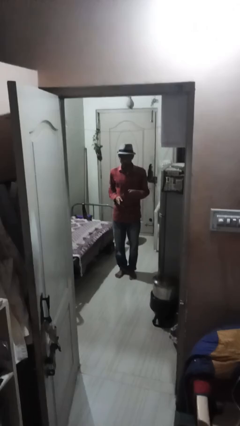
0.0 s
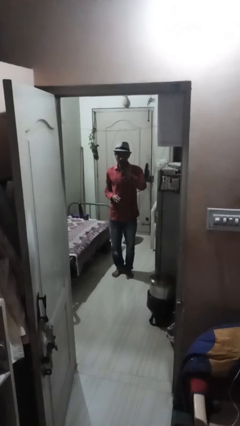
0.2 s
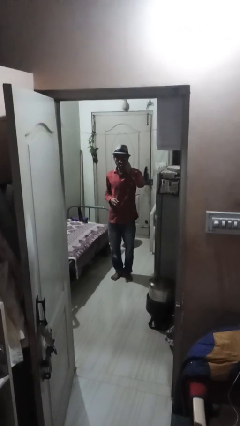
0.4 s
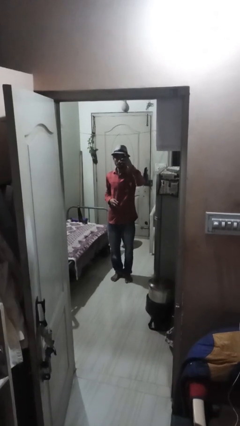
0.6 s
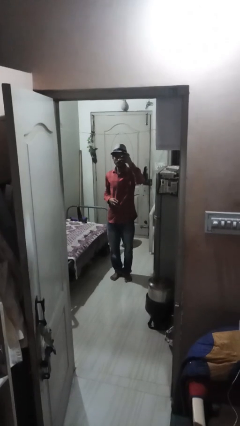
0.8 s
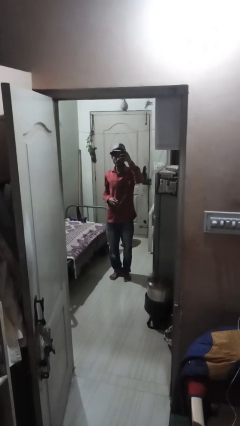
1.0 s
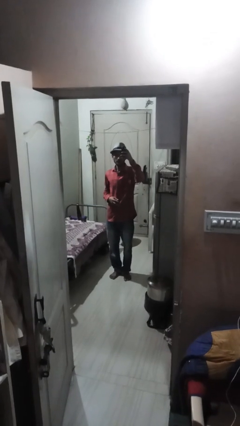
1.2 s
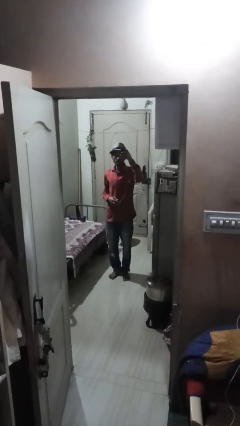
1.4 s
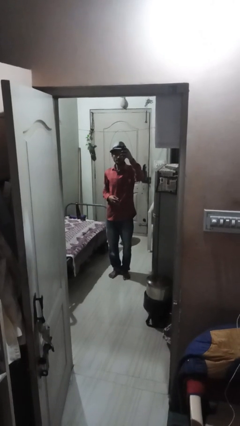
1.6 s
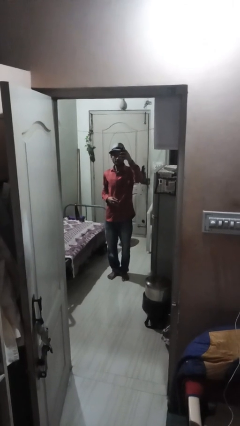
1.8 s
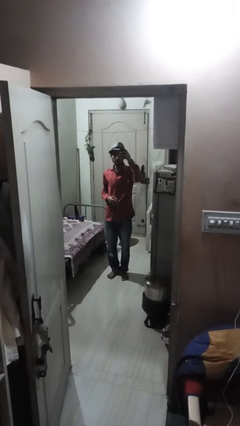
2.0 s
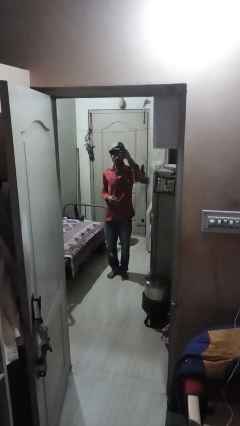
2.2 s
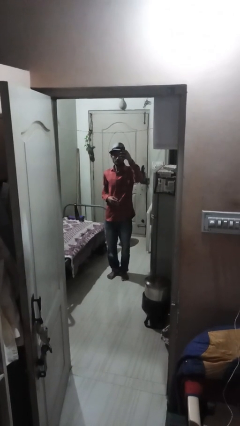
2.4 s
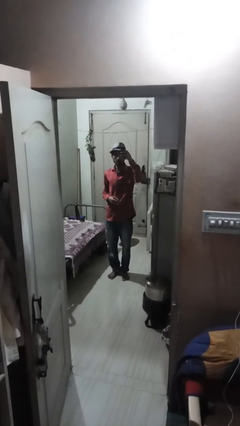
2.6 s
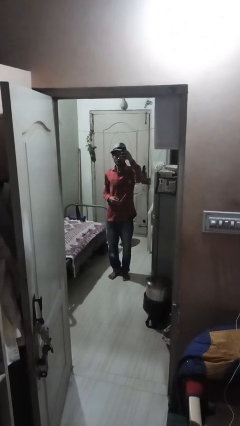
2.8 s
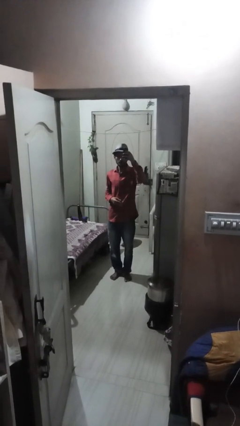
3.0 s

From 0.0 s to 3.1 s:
person takes selfie

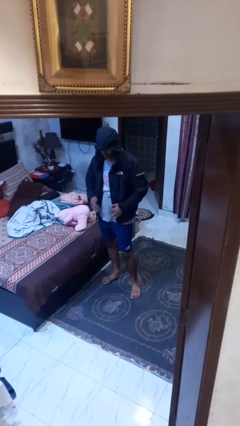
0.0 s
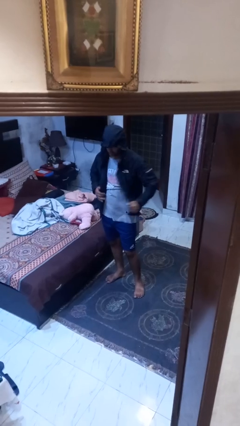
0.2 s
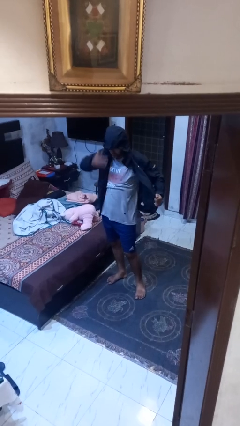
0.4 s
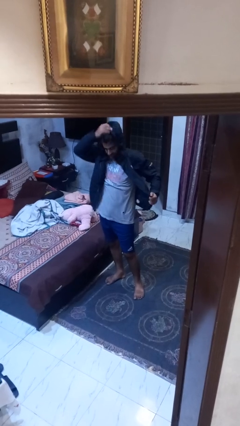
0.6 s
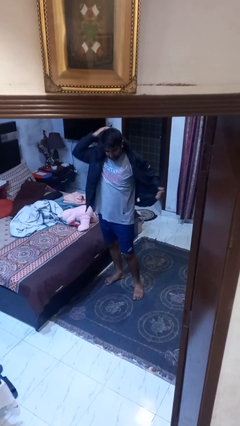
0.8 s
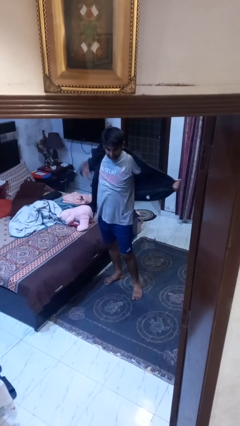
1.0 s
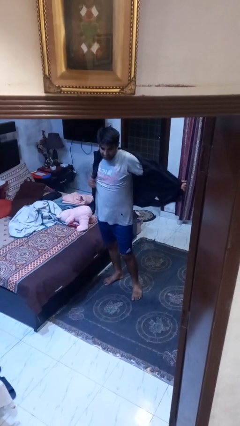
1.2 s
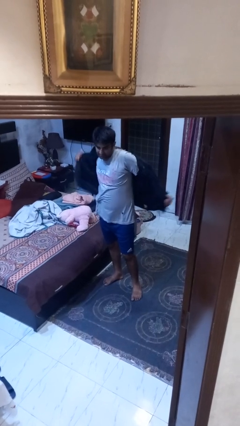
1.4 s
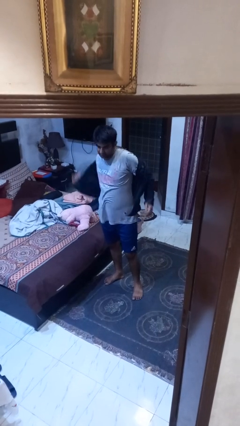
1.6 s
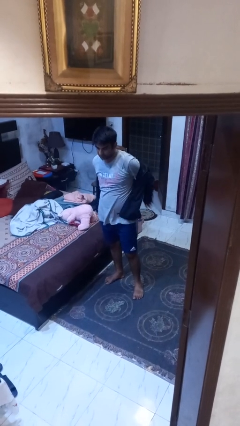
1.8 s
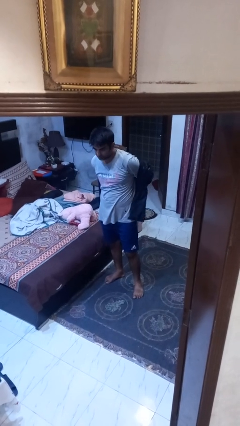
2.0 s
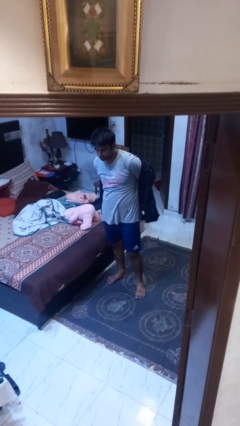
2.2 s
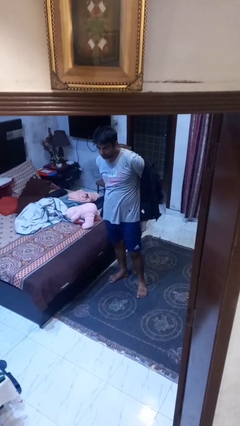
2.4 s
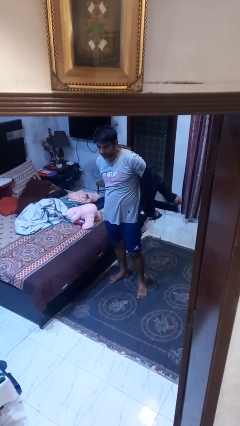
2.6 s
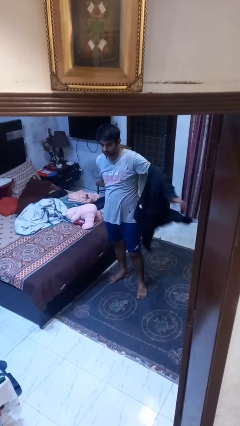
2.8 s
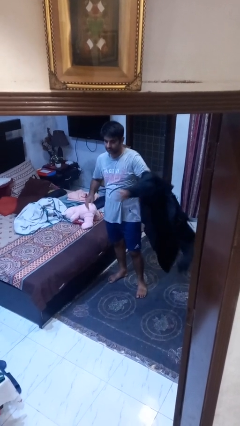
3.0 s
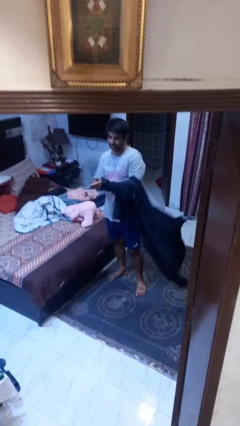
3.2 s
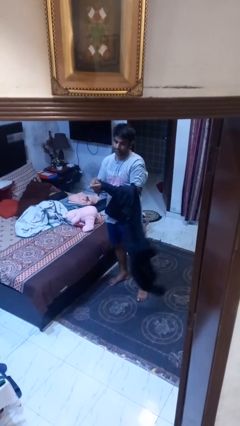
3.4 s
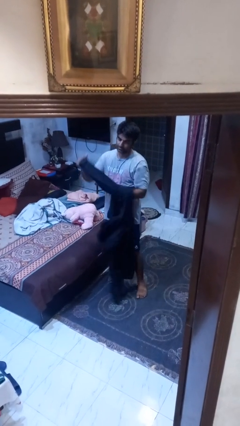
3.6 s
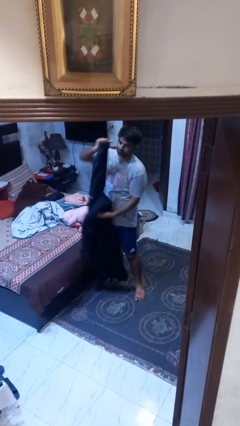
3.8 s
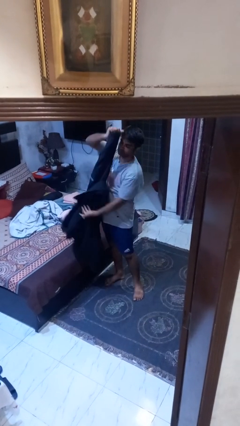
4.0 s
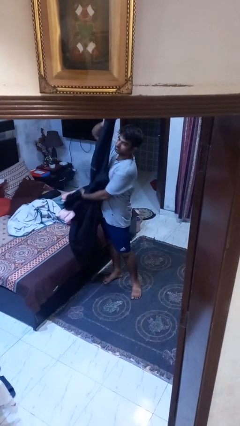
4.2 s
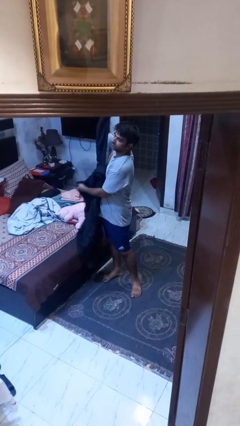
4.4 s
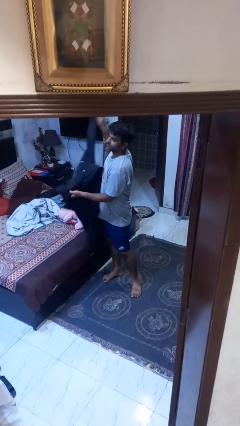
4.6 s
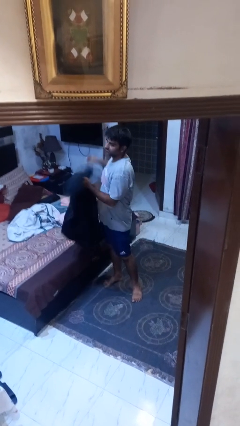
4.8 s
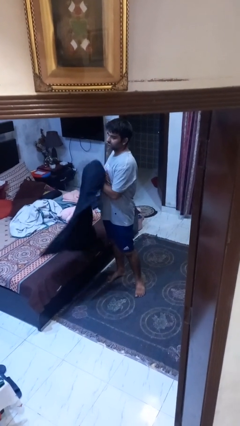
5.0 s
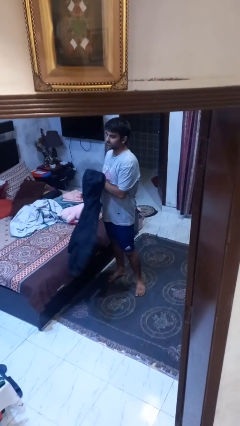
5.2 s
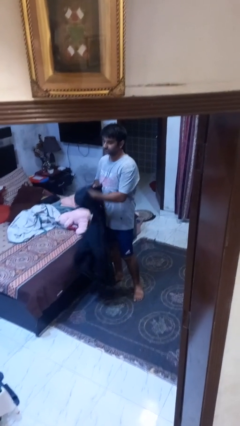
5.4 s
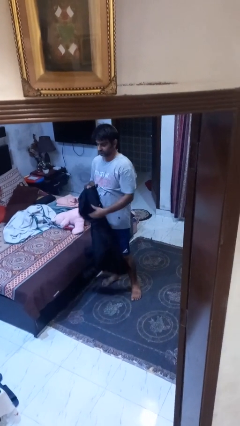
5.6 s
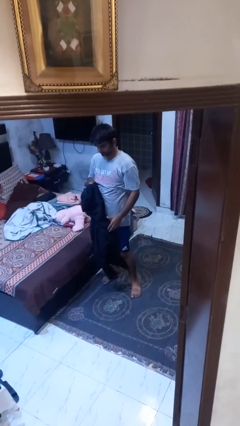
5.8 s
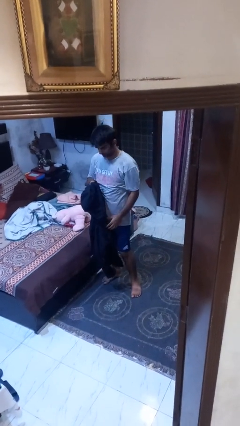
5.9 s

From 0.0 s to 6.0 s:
person takes off hoodie

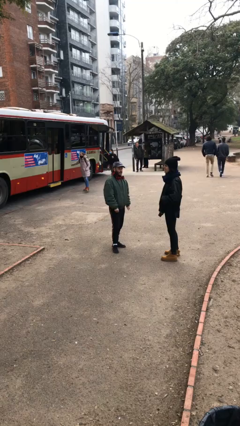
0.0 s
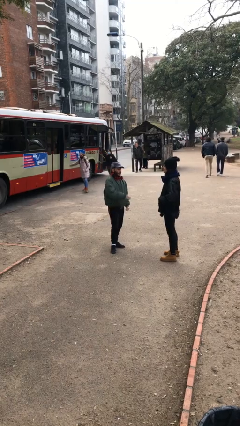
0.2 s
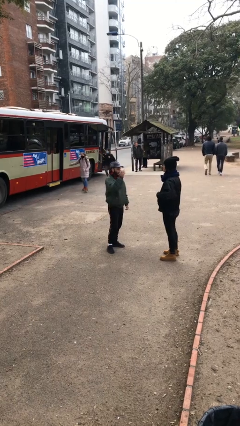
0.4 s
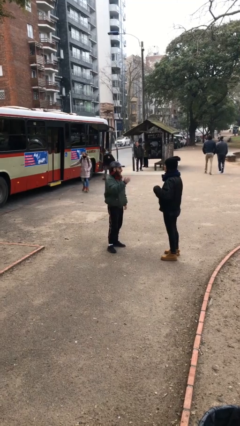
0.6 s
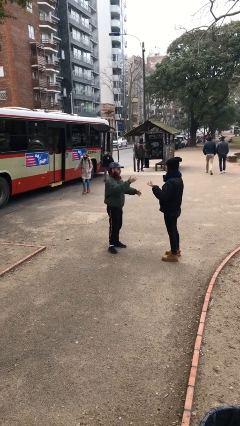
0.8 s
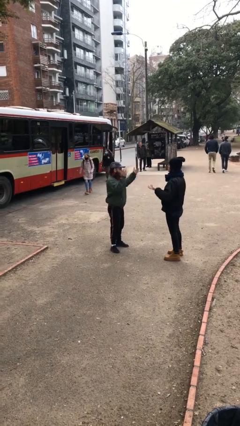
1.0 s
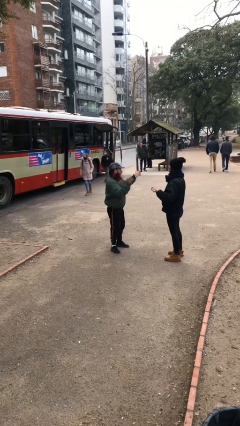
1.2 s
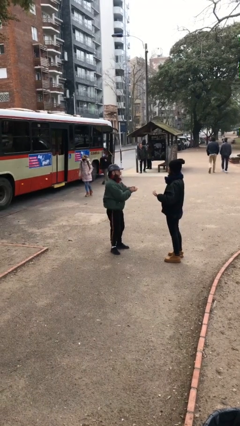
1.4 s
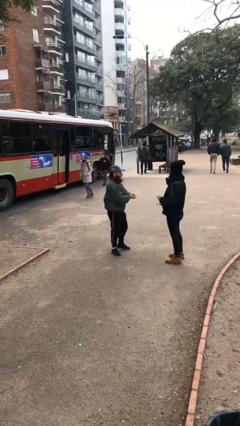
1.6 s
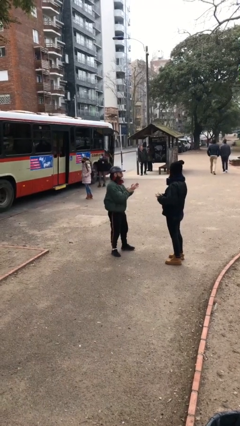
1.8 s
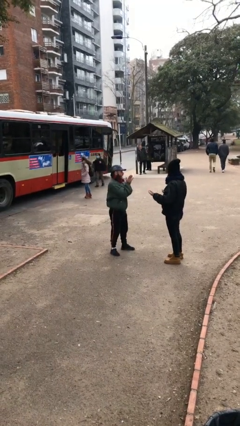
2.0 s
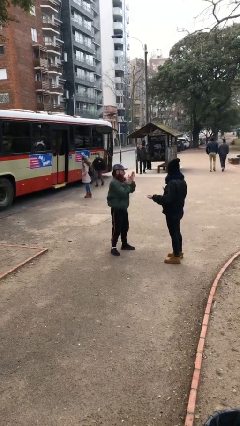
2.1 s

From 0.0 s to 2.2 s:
person talks to person

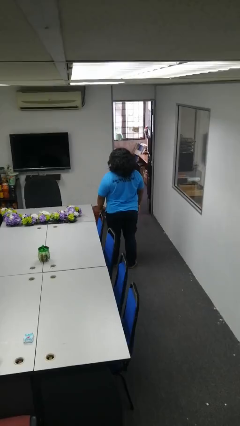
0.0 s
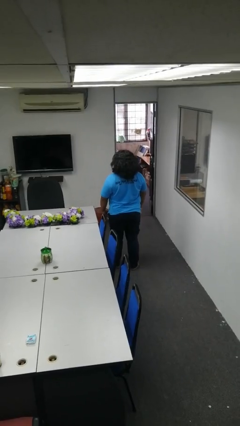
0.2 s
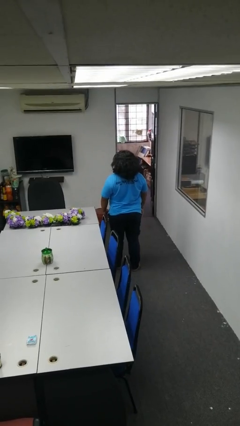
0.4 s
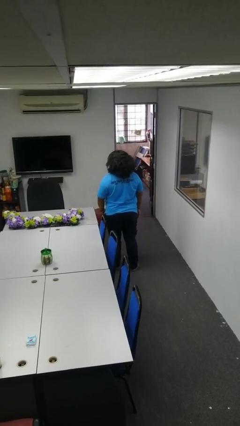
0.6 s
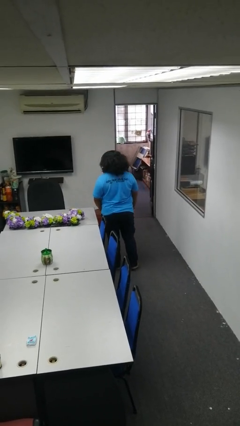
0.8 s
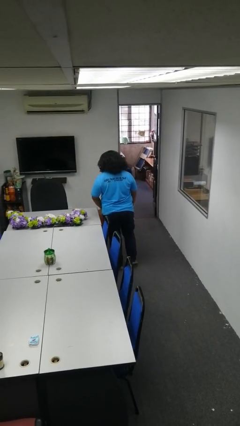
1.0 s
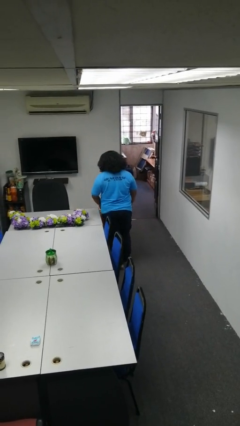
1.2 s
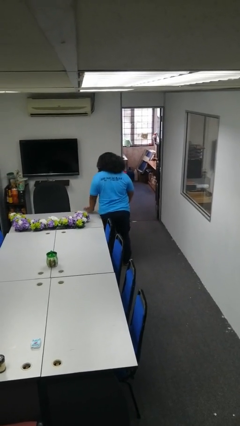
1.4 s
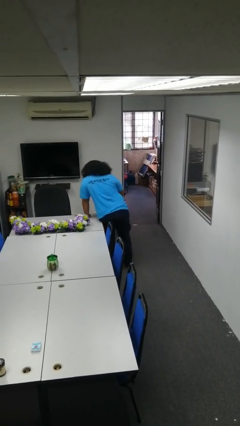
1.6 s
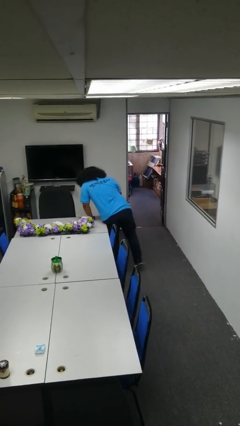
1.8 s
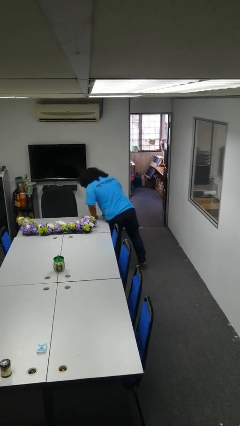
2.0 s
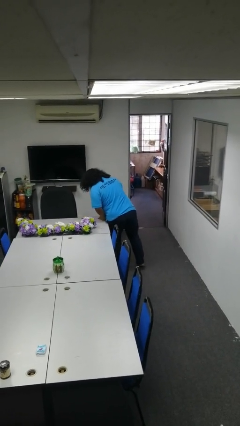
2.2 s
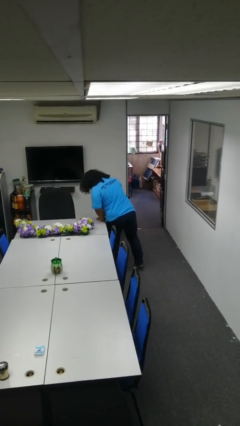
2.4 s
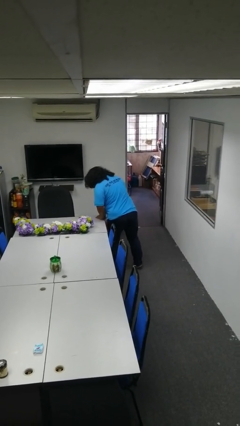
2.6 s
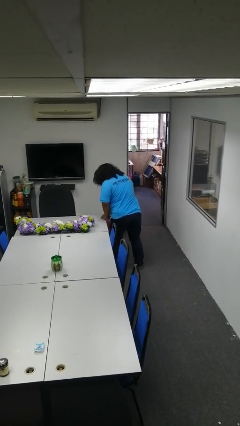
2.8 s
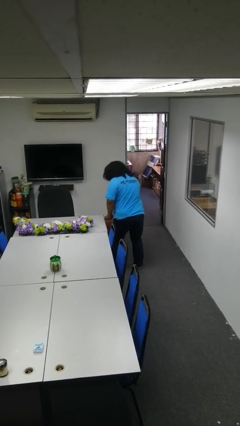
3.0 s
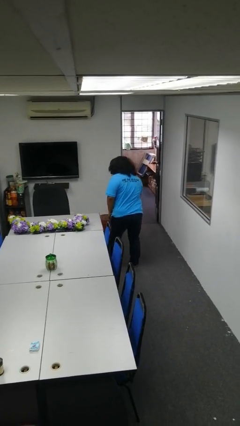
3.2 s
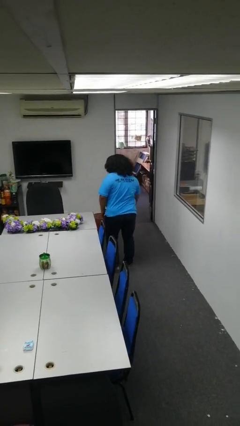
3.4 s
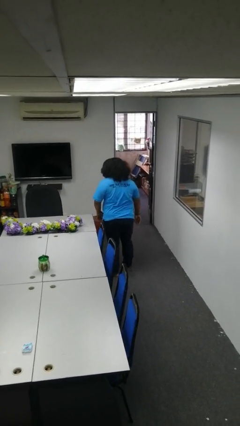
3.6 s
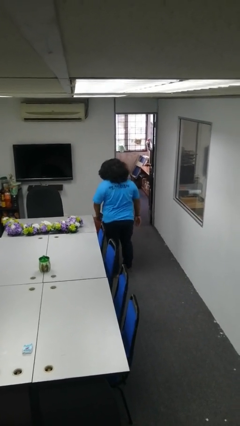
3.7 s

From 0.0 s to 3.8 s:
person bumps into table

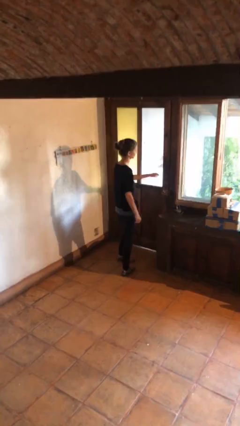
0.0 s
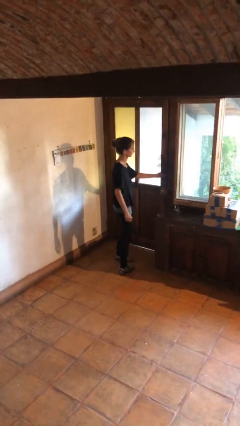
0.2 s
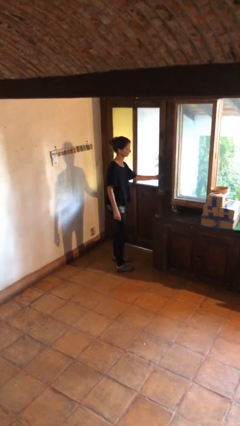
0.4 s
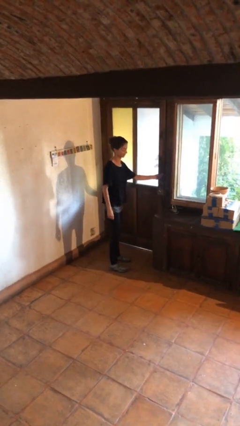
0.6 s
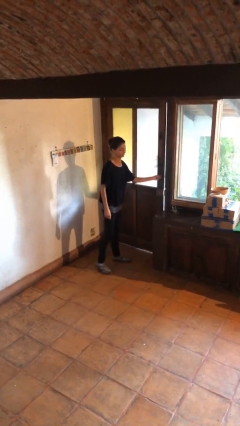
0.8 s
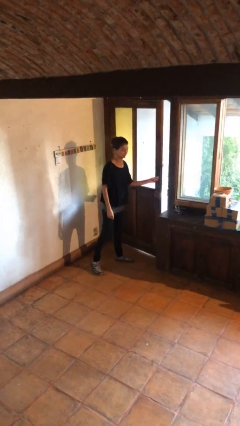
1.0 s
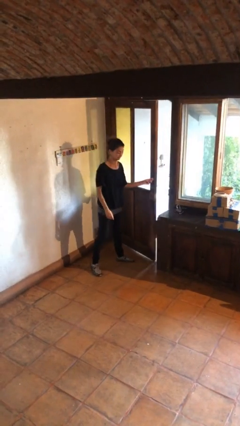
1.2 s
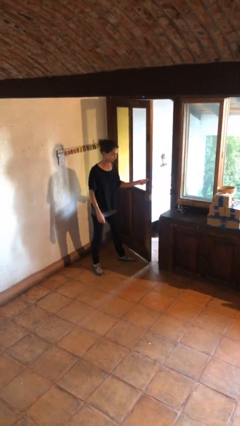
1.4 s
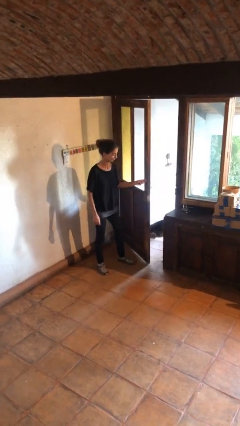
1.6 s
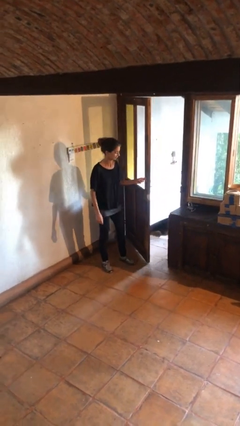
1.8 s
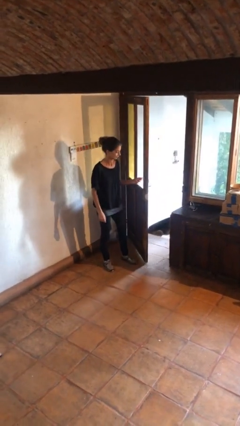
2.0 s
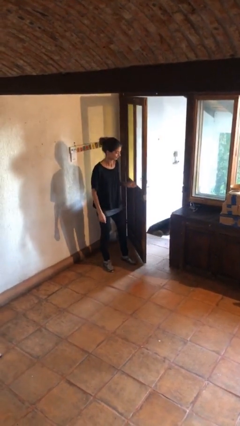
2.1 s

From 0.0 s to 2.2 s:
person opens facility door

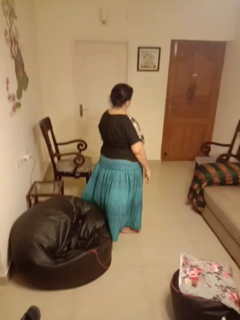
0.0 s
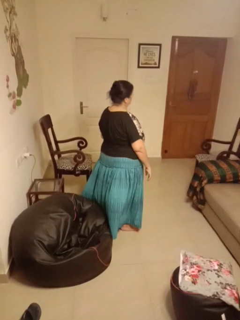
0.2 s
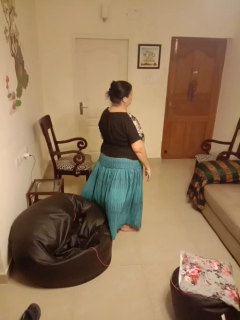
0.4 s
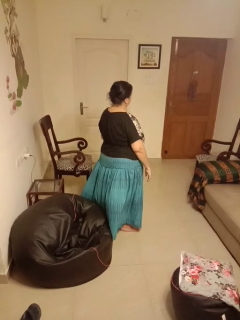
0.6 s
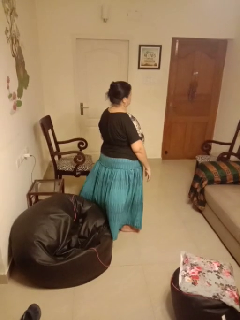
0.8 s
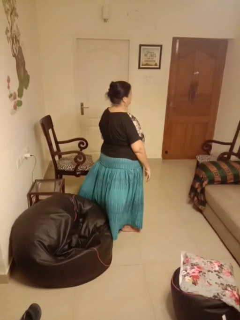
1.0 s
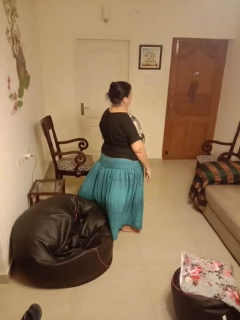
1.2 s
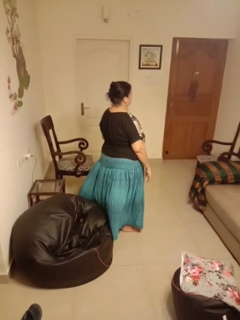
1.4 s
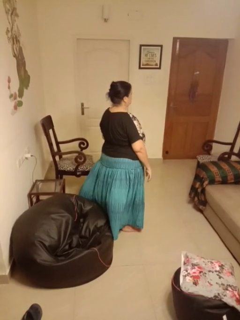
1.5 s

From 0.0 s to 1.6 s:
person shakes head
